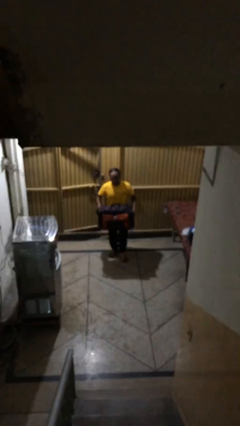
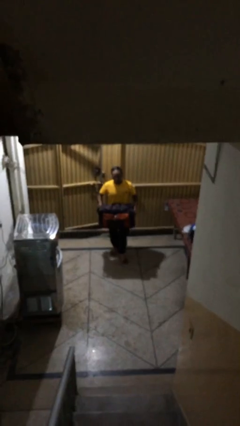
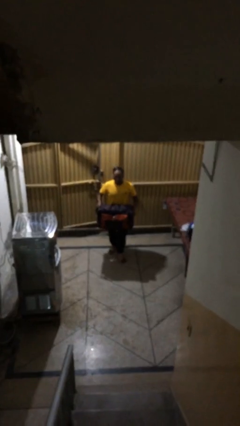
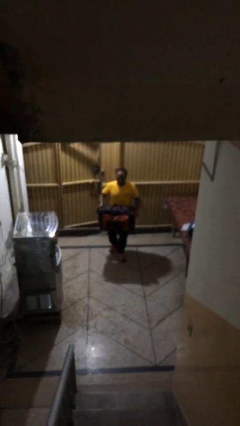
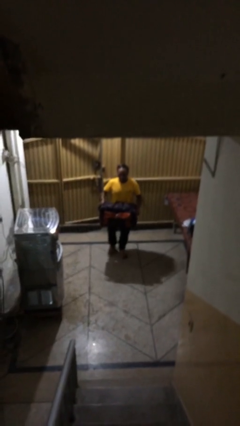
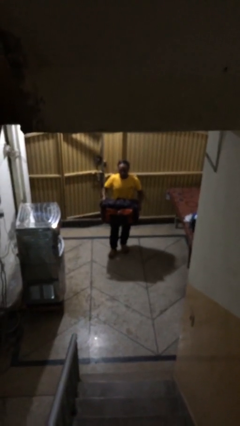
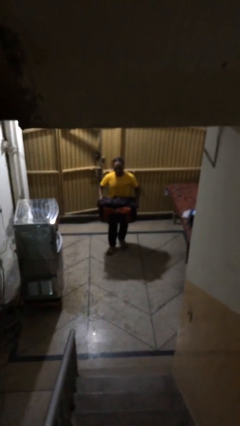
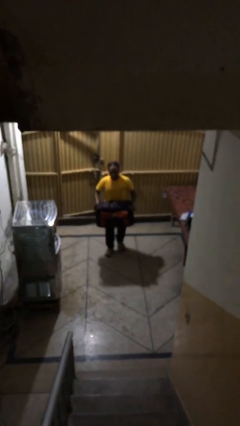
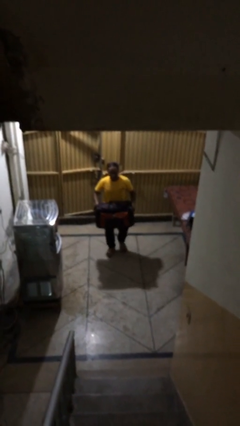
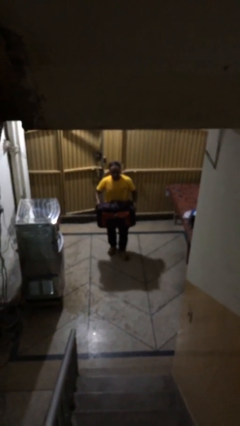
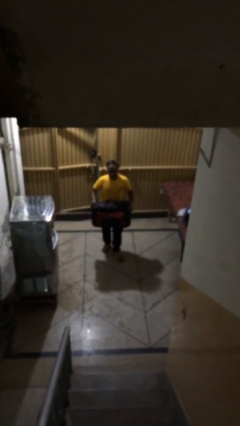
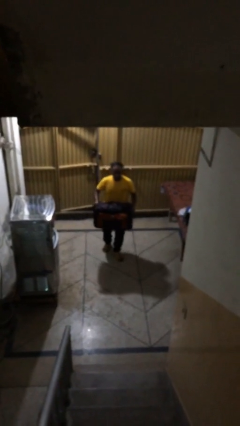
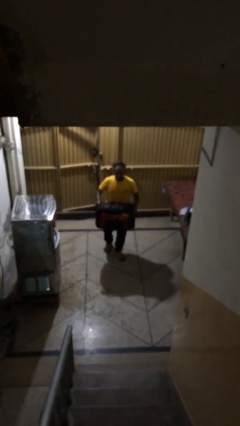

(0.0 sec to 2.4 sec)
person carries heavy object

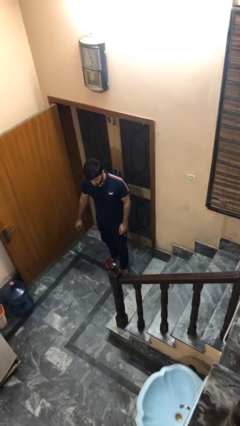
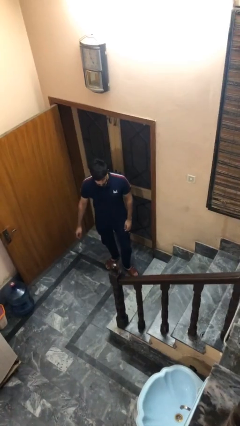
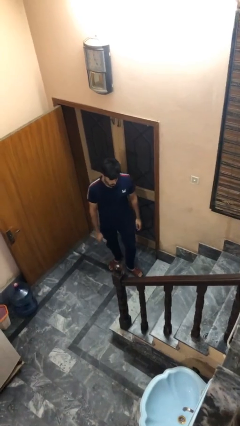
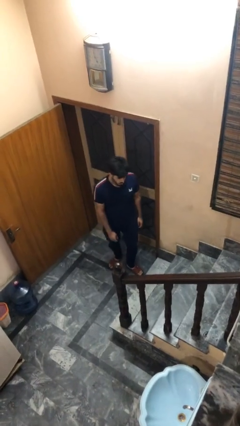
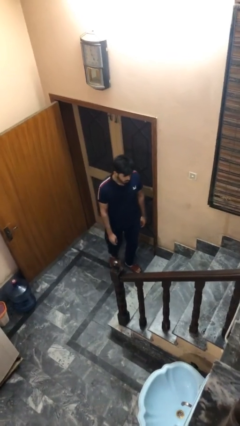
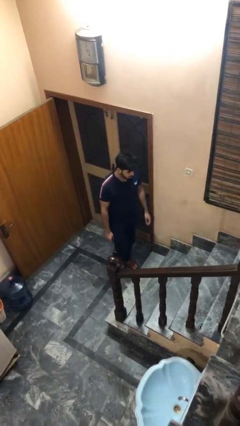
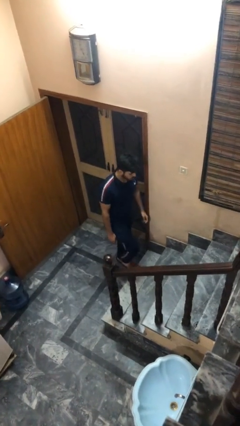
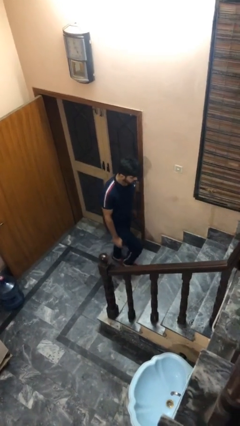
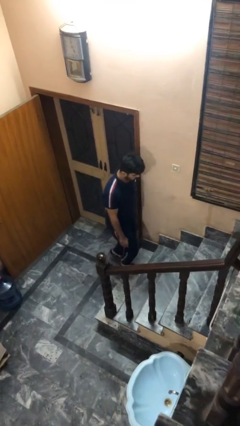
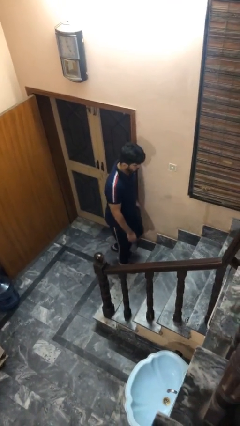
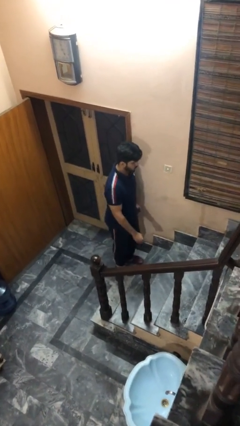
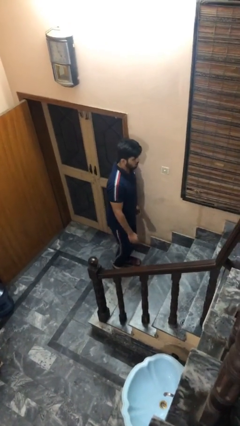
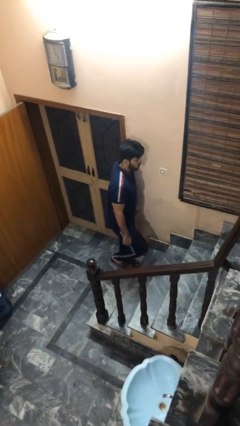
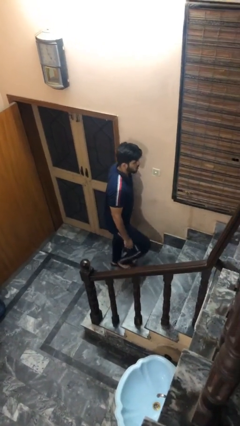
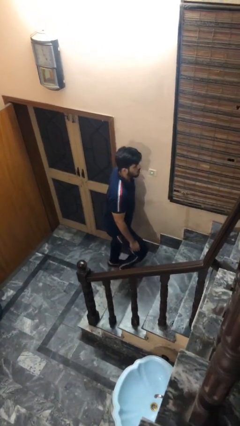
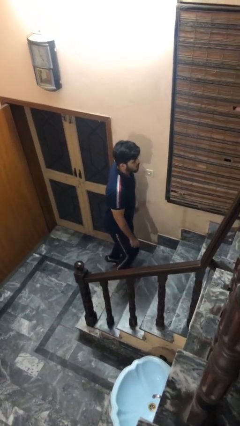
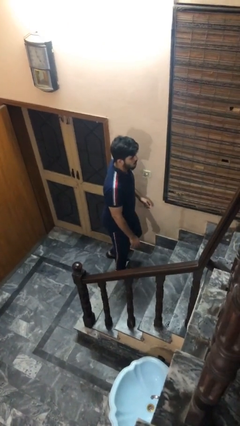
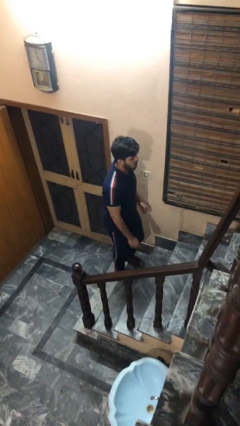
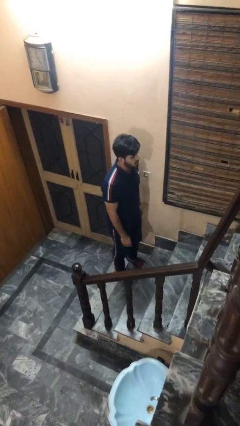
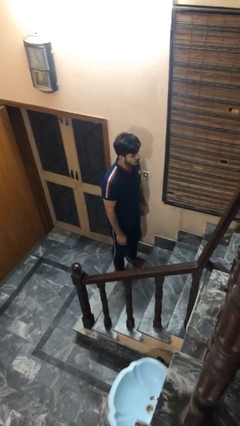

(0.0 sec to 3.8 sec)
person climbs up stairs

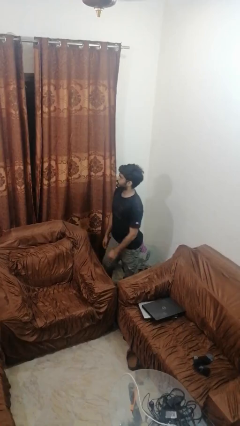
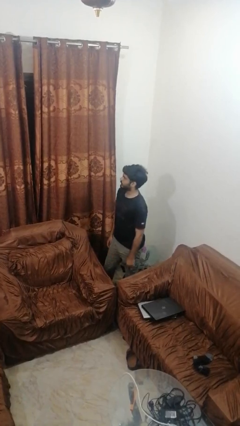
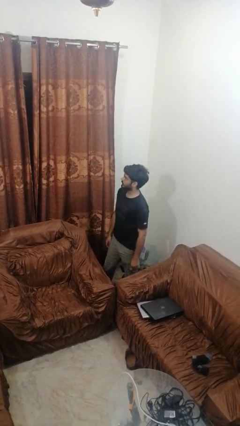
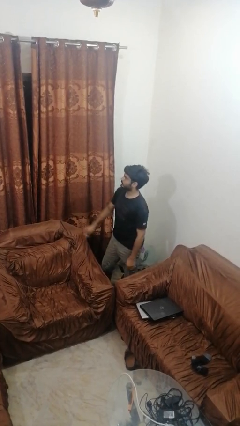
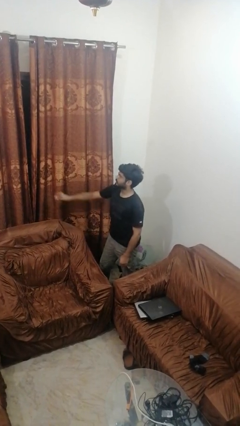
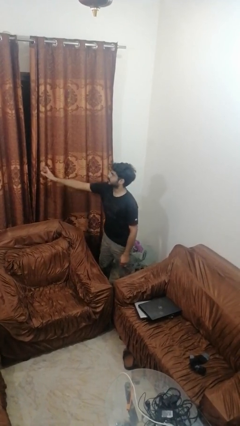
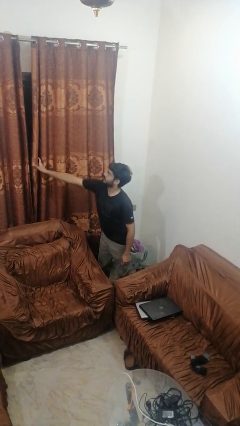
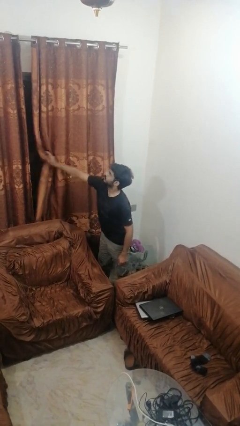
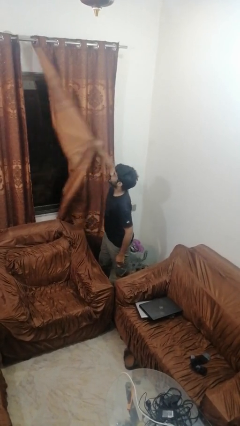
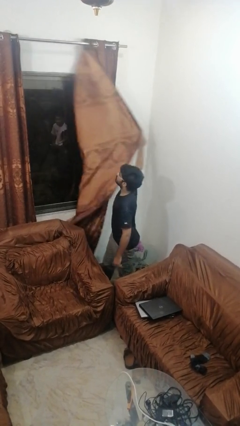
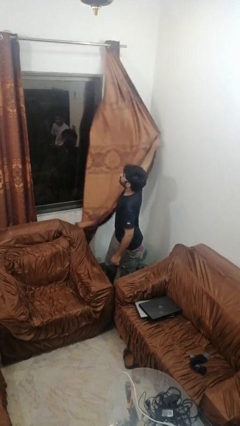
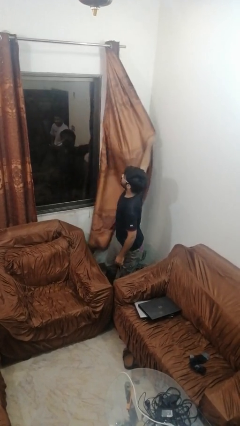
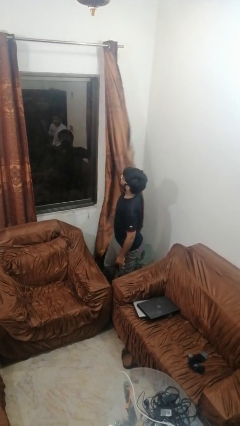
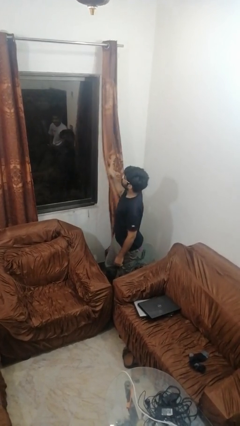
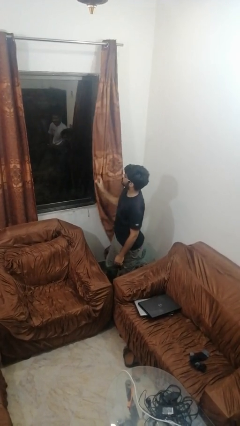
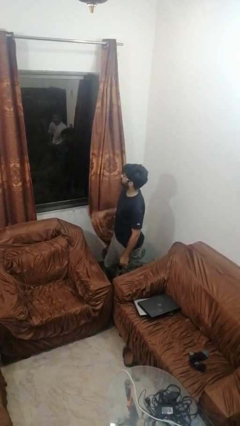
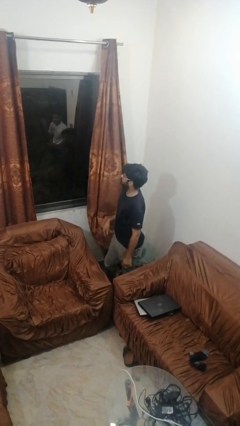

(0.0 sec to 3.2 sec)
person opens curtains

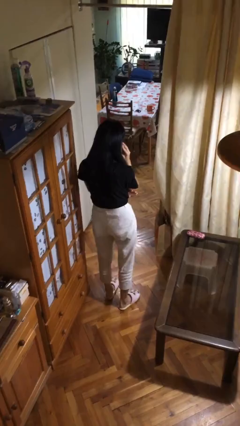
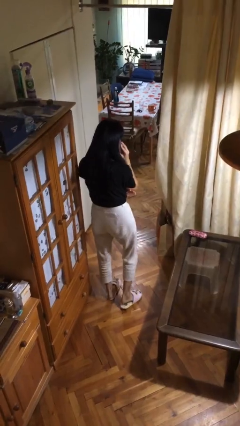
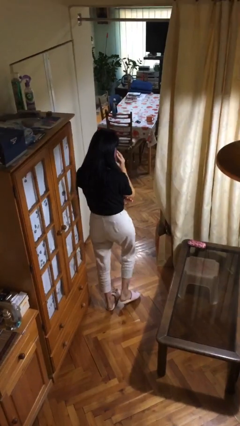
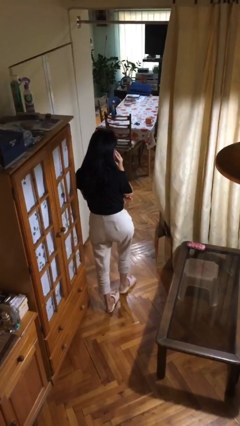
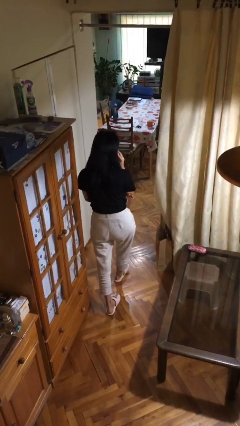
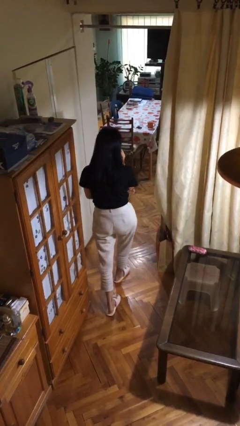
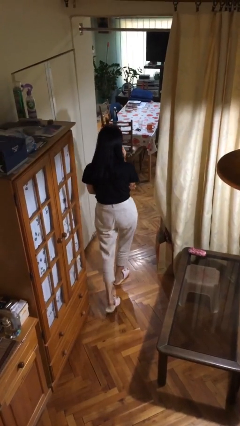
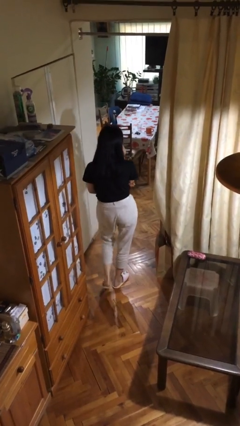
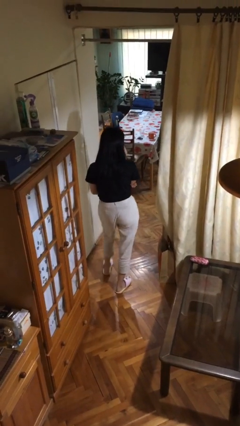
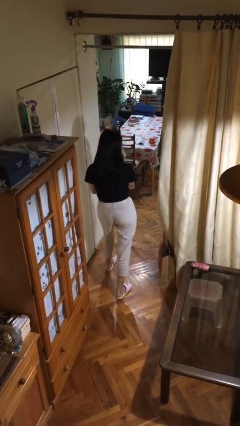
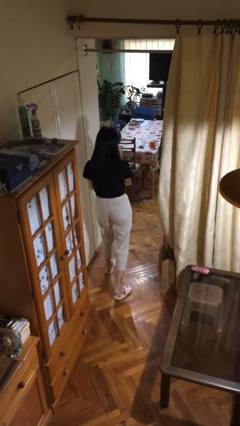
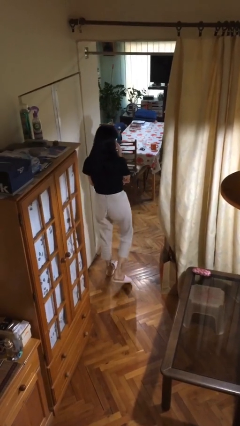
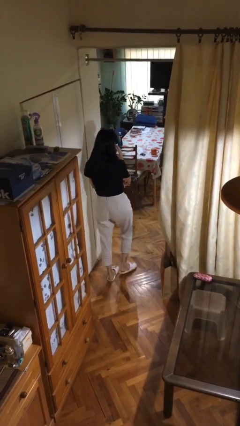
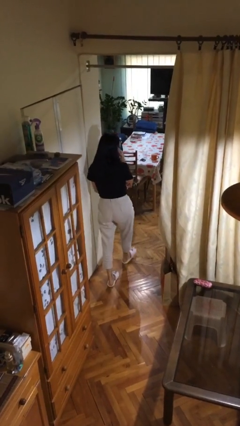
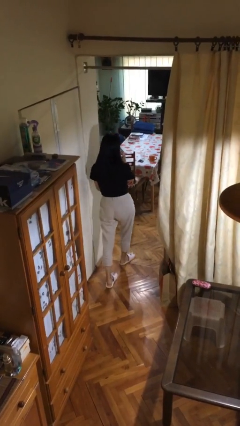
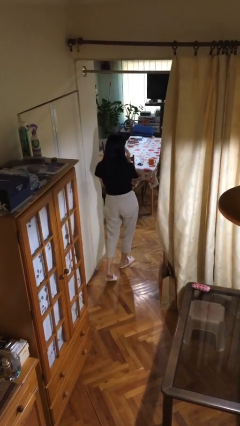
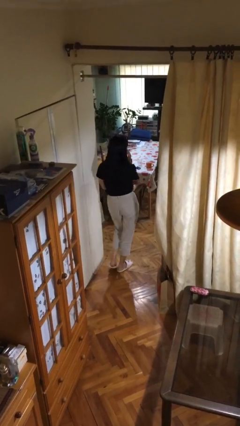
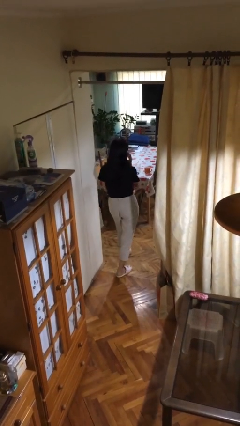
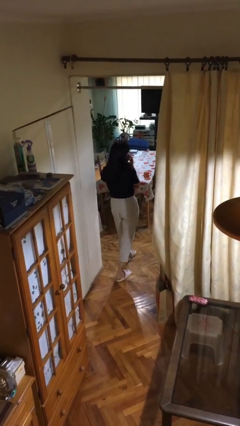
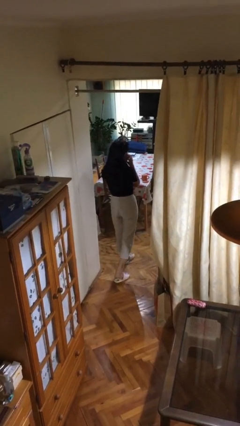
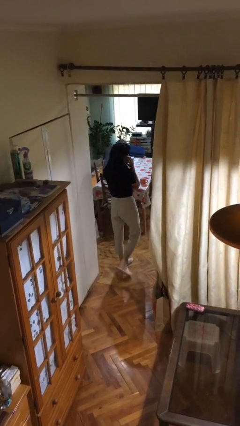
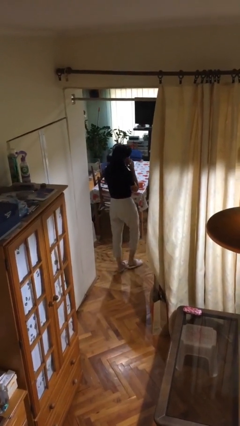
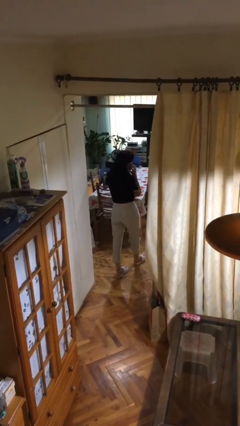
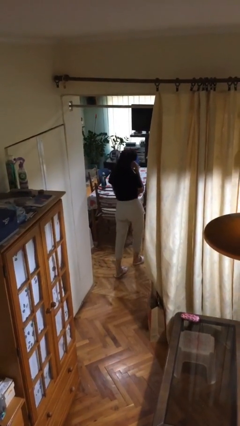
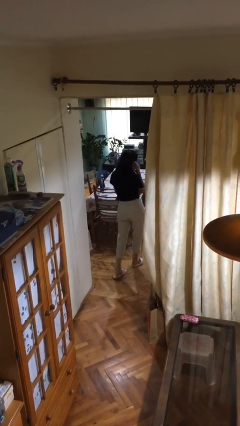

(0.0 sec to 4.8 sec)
person exits scene through structure

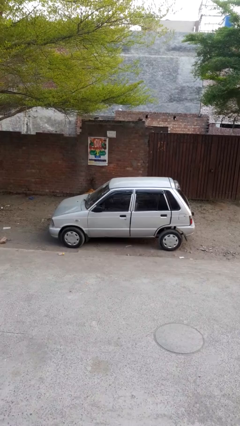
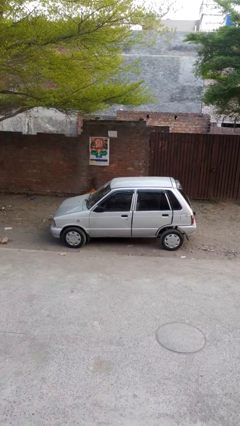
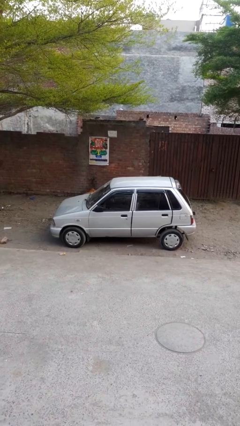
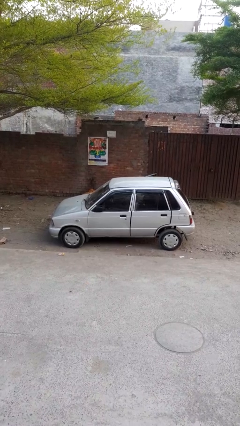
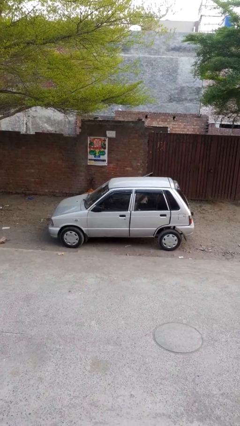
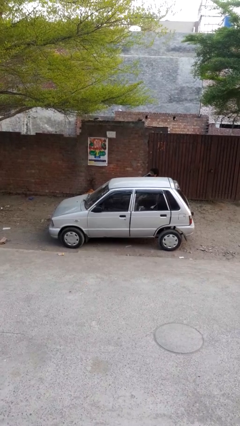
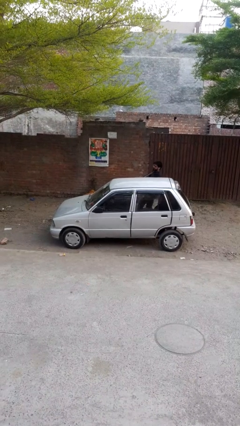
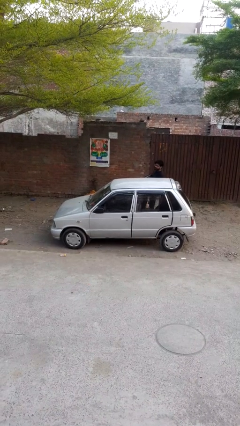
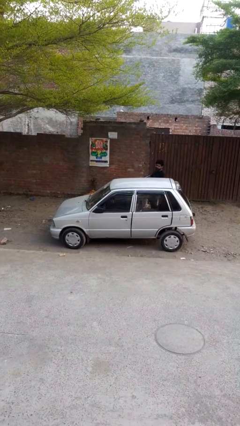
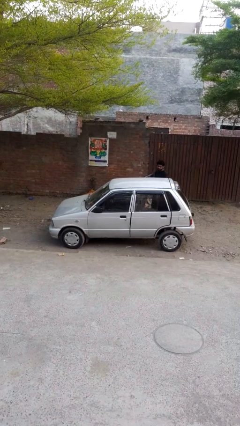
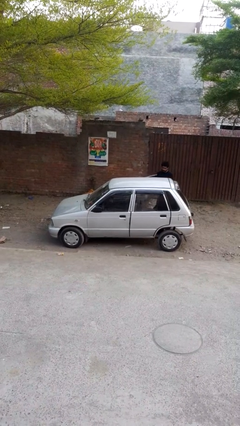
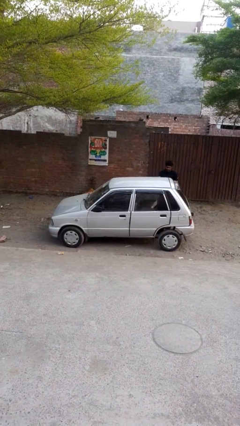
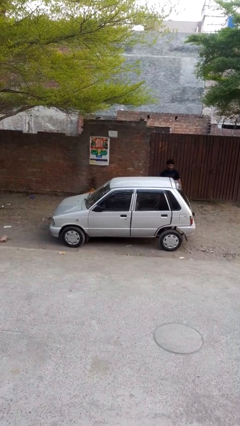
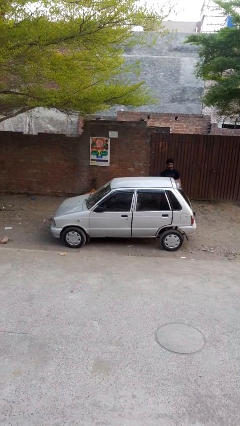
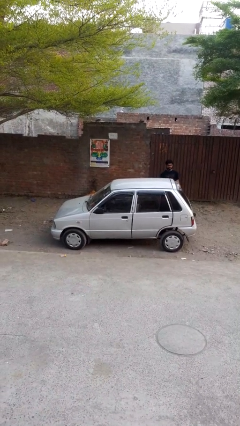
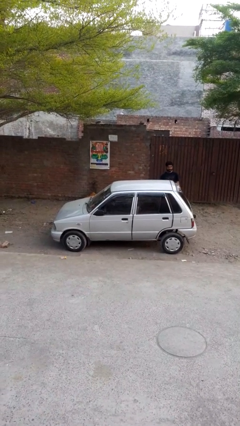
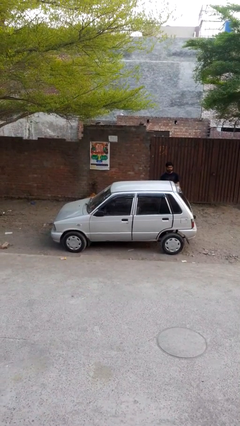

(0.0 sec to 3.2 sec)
car drops off person

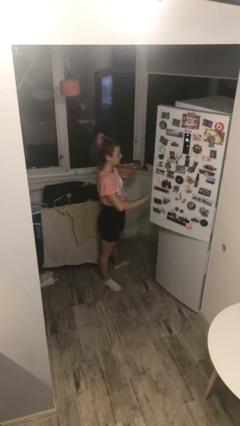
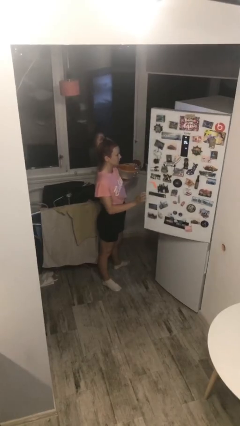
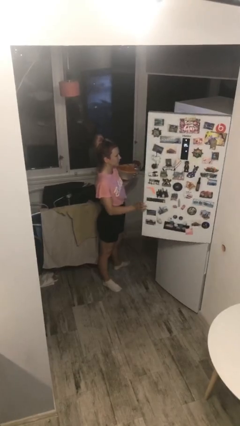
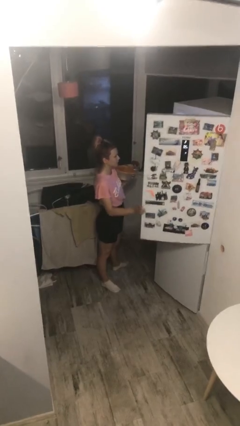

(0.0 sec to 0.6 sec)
person opens refrigerator
